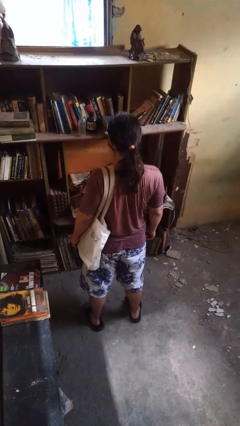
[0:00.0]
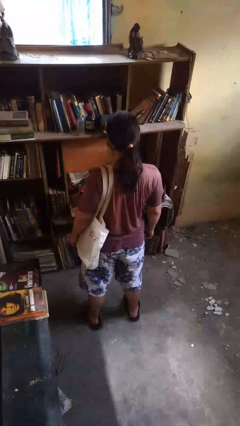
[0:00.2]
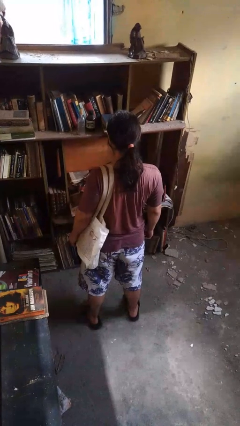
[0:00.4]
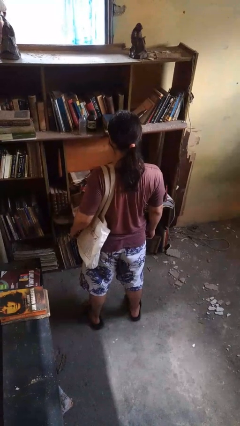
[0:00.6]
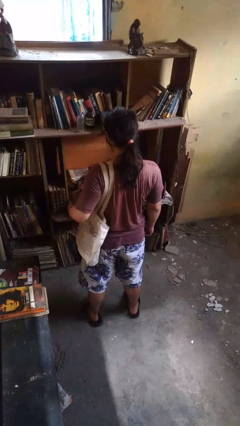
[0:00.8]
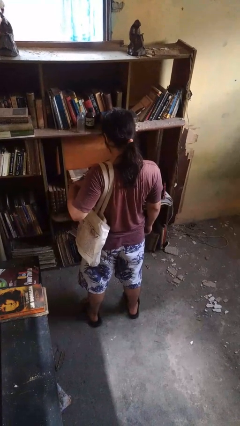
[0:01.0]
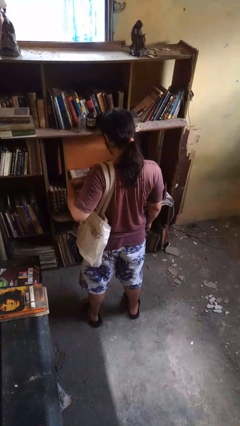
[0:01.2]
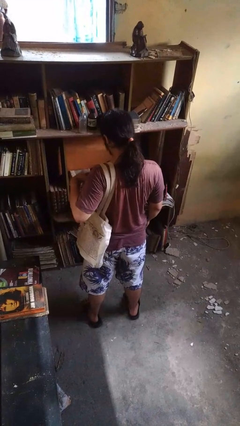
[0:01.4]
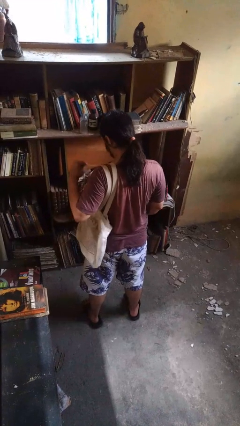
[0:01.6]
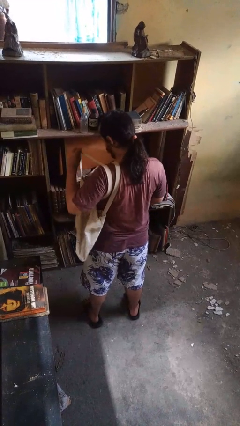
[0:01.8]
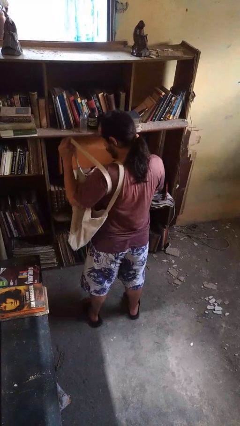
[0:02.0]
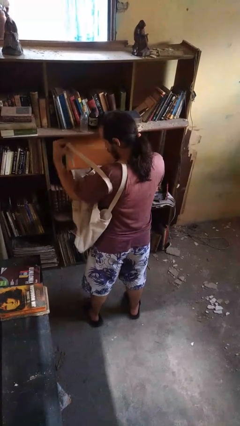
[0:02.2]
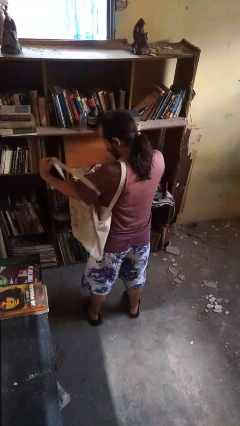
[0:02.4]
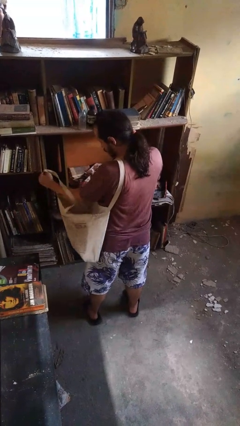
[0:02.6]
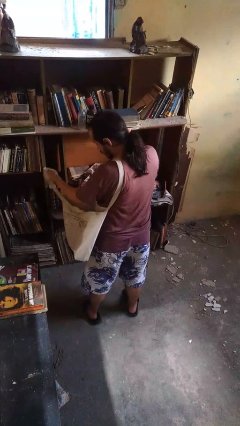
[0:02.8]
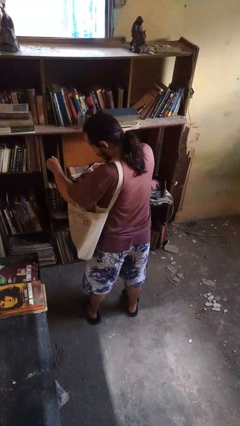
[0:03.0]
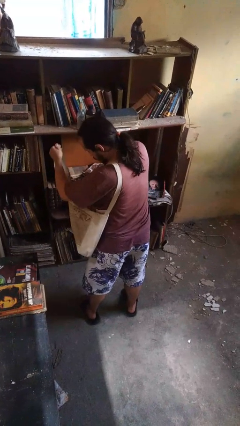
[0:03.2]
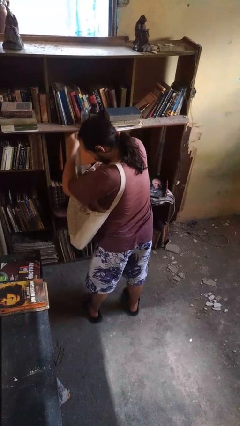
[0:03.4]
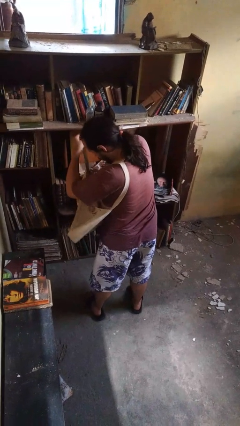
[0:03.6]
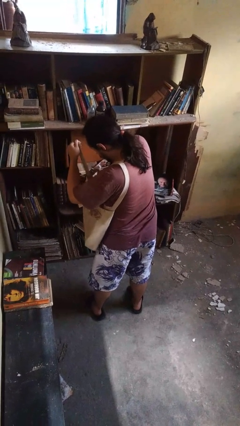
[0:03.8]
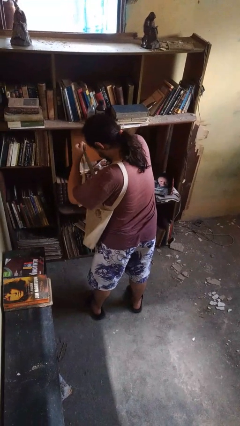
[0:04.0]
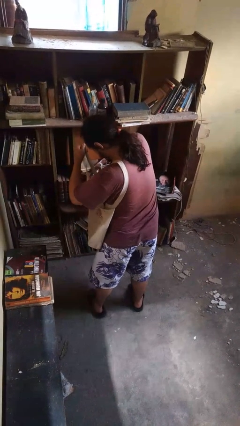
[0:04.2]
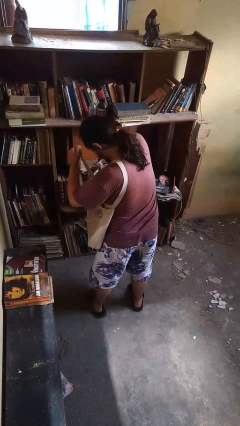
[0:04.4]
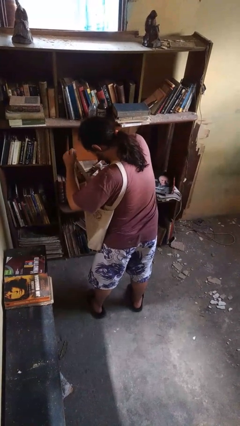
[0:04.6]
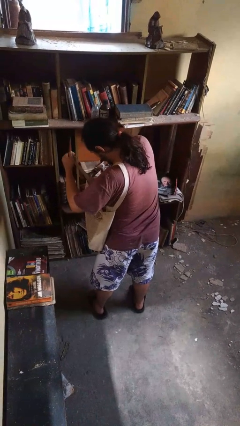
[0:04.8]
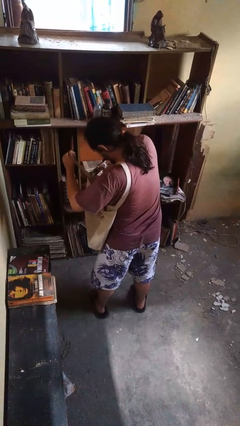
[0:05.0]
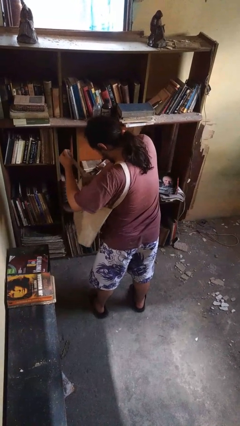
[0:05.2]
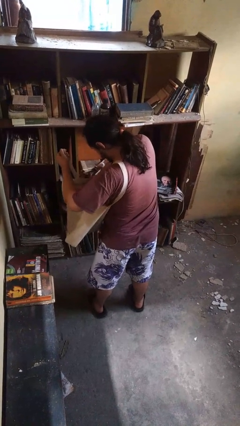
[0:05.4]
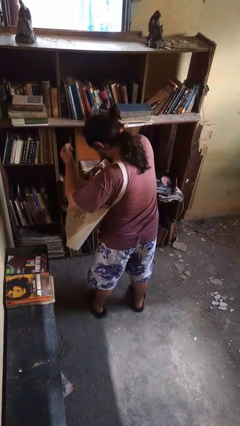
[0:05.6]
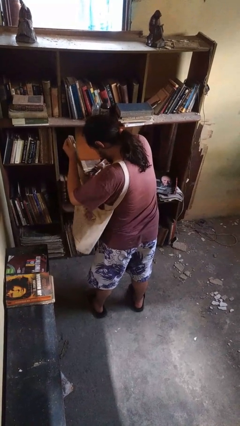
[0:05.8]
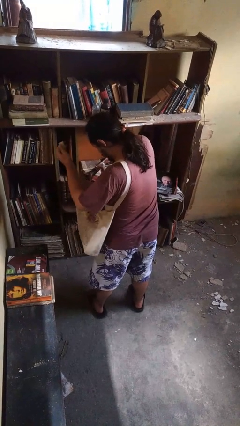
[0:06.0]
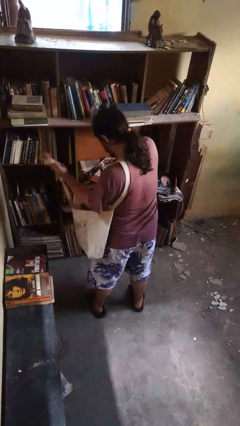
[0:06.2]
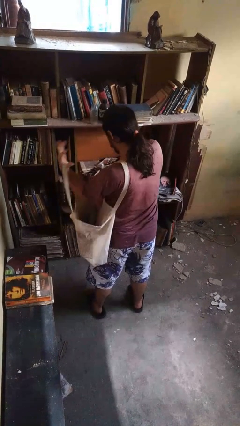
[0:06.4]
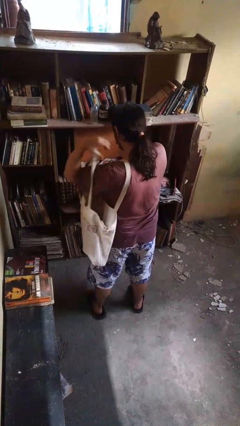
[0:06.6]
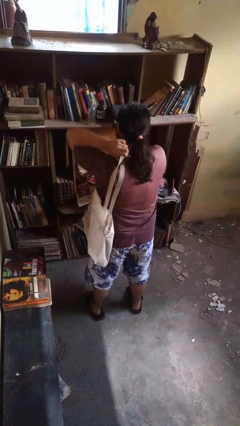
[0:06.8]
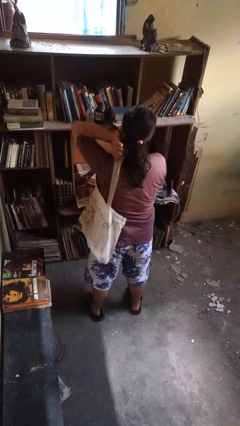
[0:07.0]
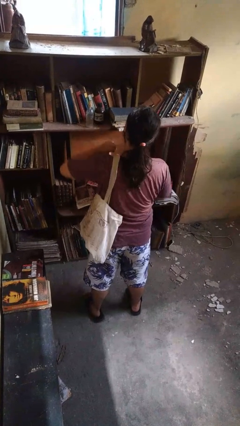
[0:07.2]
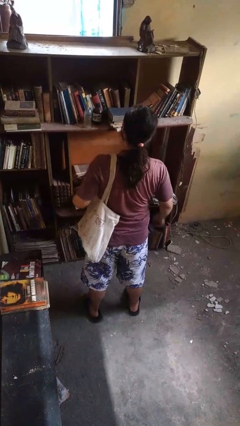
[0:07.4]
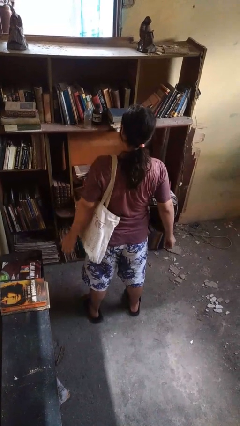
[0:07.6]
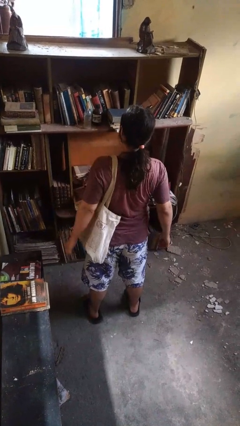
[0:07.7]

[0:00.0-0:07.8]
person searches in bag

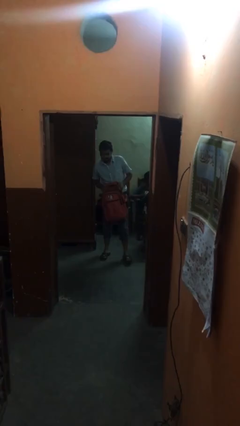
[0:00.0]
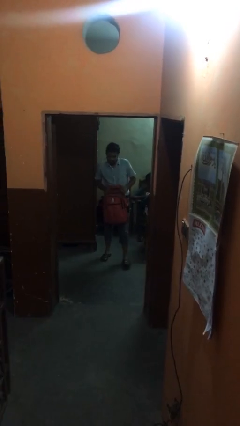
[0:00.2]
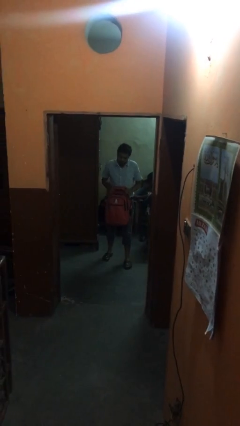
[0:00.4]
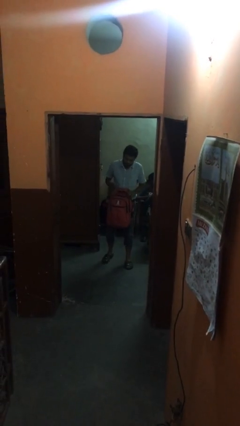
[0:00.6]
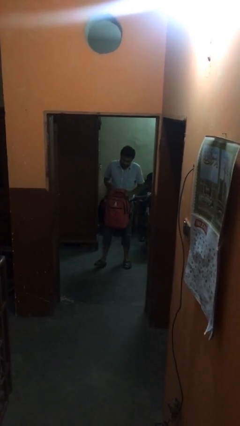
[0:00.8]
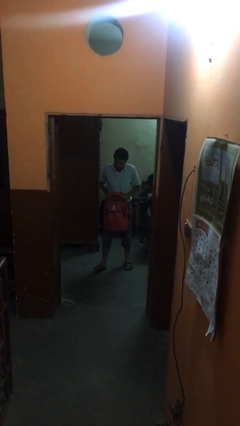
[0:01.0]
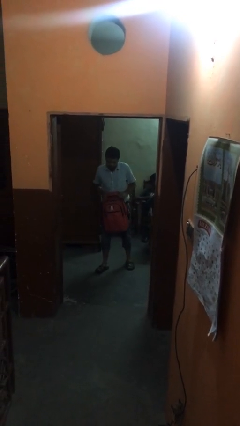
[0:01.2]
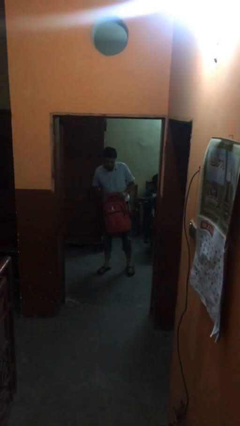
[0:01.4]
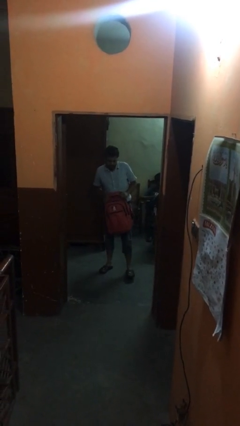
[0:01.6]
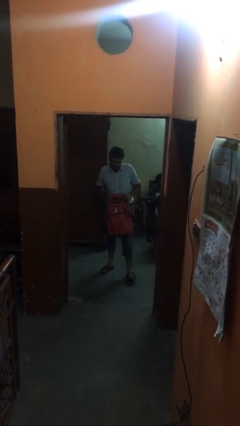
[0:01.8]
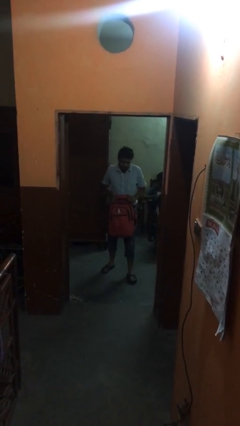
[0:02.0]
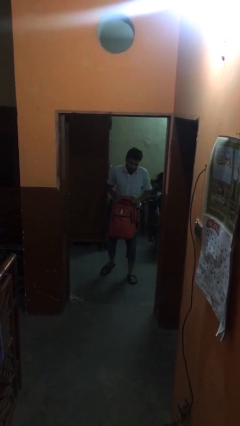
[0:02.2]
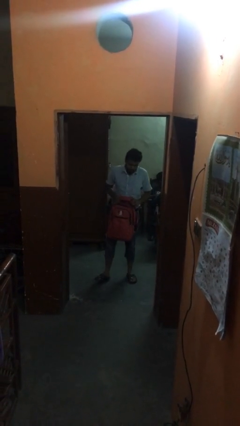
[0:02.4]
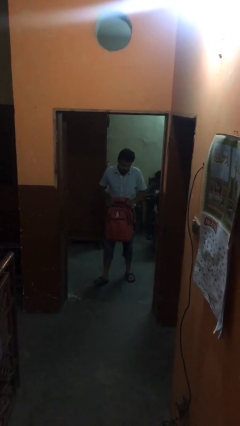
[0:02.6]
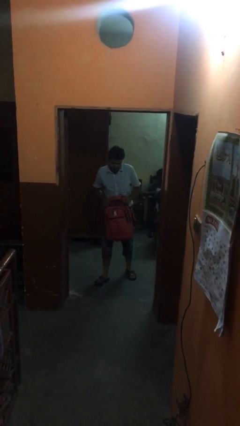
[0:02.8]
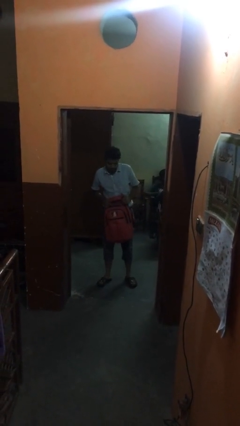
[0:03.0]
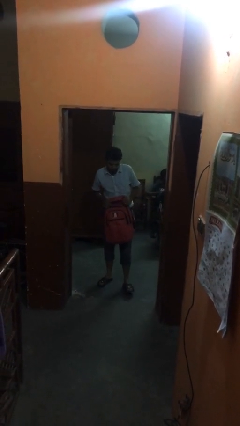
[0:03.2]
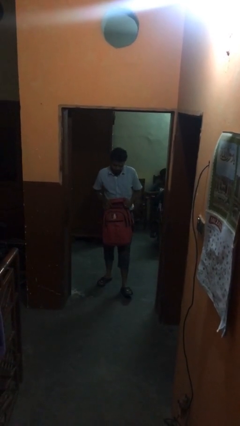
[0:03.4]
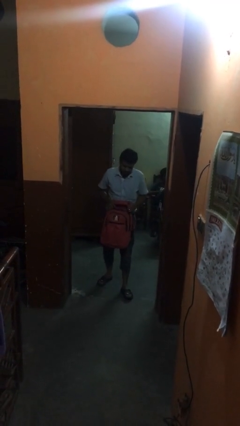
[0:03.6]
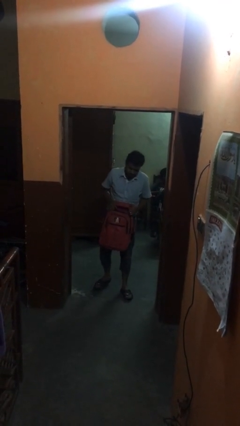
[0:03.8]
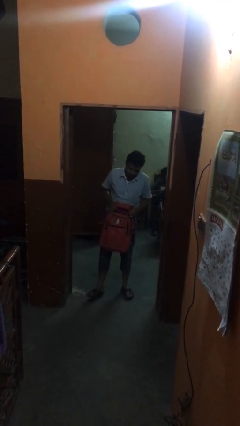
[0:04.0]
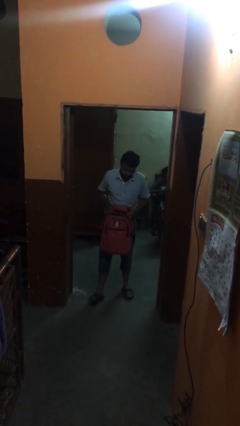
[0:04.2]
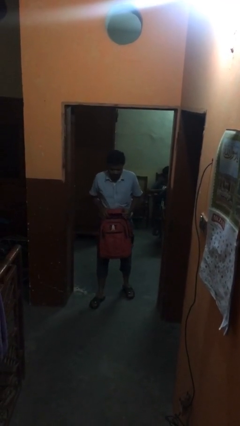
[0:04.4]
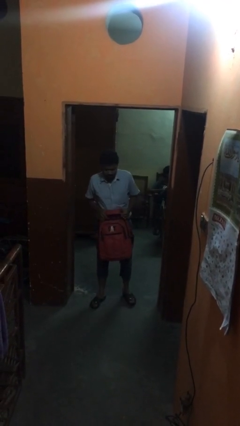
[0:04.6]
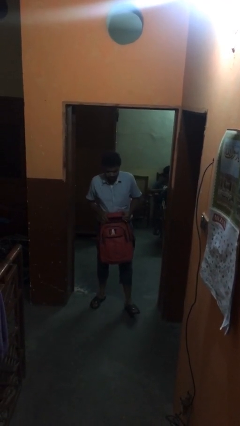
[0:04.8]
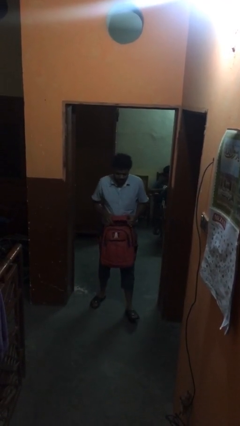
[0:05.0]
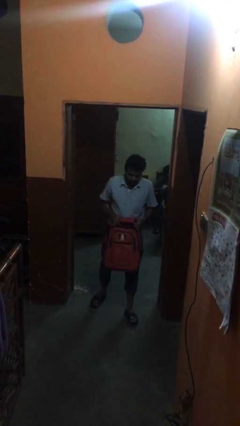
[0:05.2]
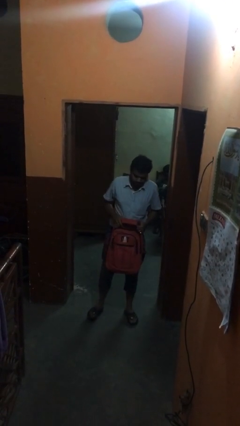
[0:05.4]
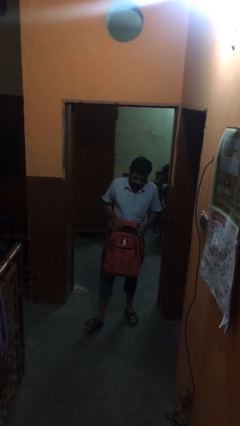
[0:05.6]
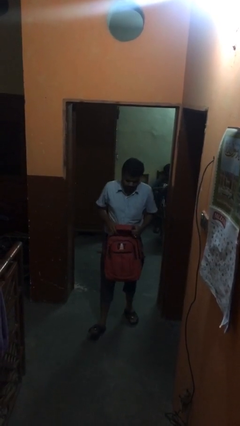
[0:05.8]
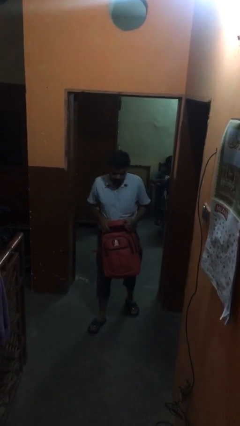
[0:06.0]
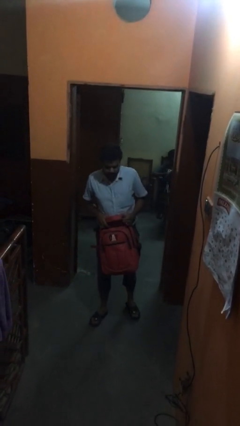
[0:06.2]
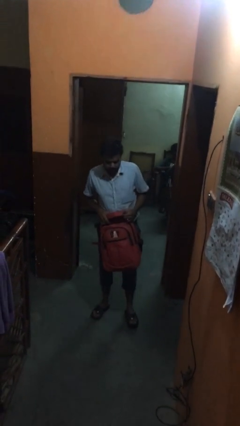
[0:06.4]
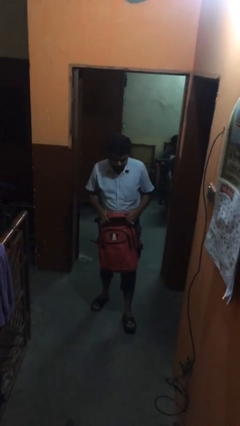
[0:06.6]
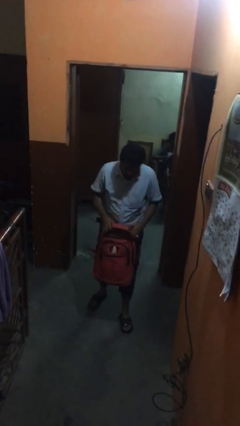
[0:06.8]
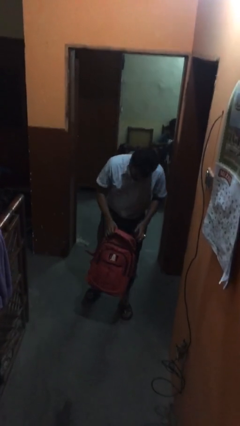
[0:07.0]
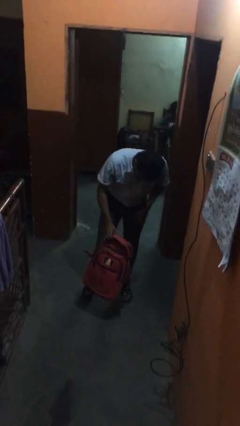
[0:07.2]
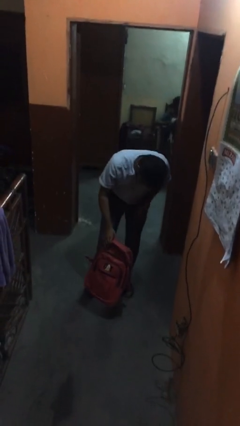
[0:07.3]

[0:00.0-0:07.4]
person carries heavy object

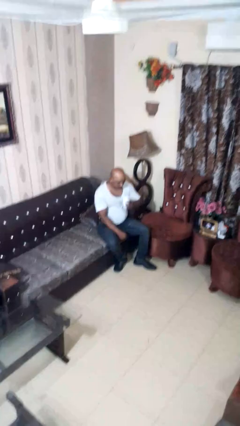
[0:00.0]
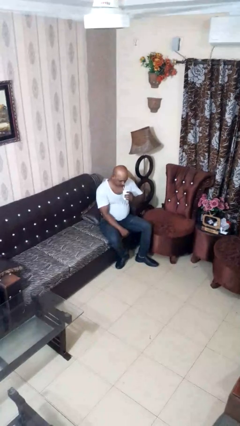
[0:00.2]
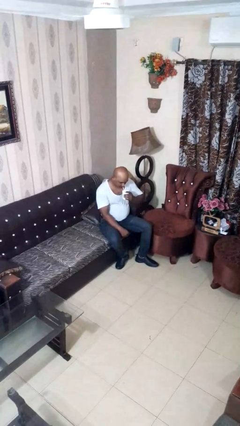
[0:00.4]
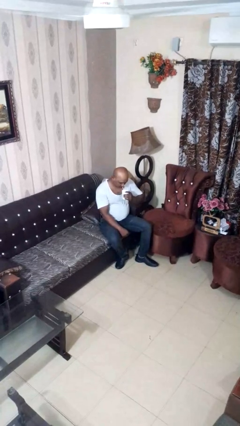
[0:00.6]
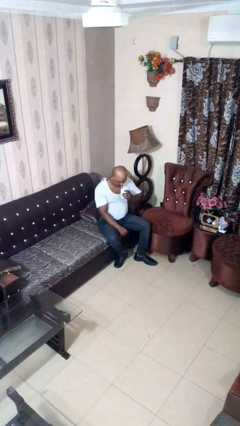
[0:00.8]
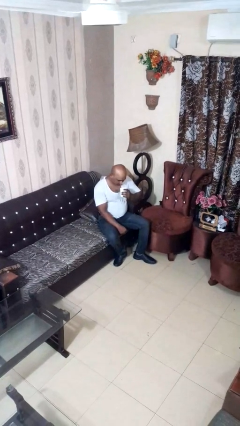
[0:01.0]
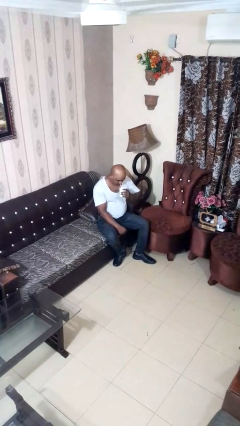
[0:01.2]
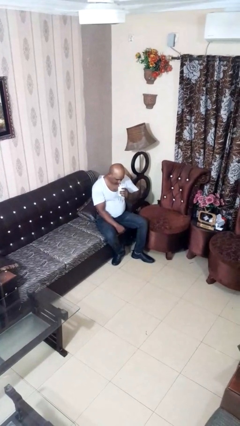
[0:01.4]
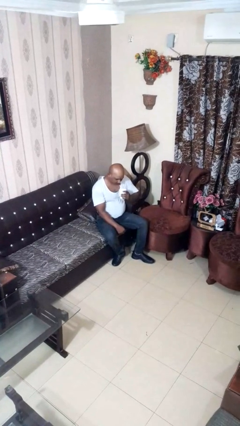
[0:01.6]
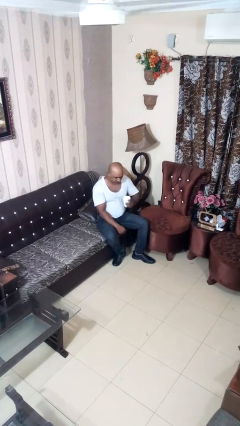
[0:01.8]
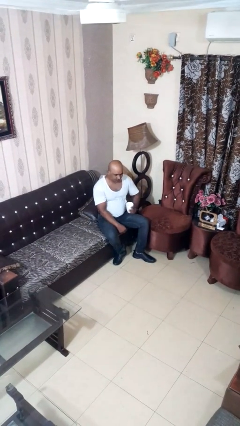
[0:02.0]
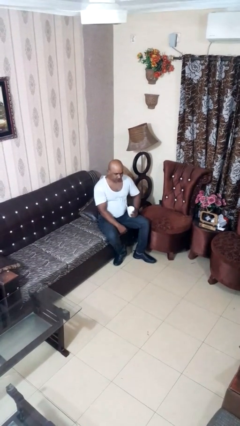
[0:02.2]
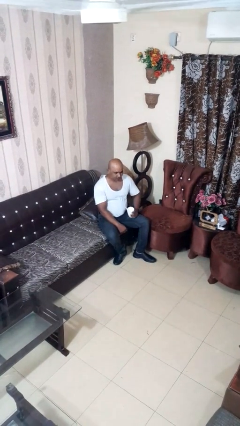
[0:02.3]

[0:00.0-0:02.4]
person drinks from straw
